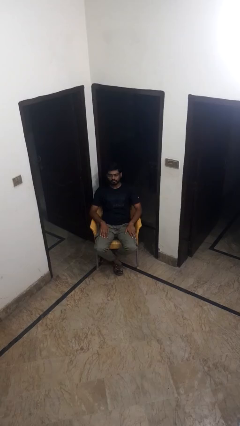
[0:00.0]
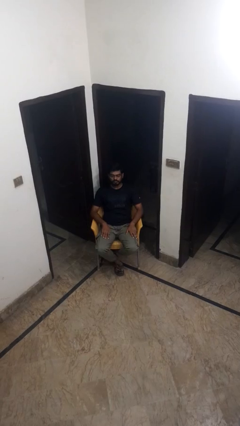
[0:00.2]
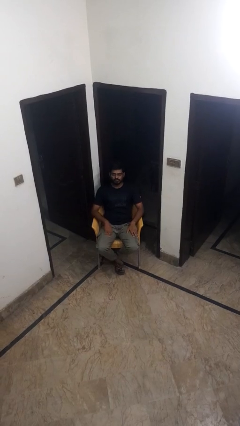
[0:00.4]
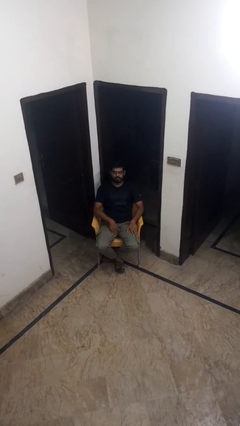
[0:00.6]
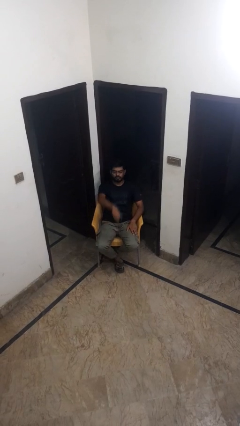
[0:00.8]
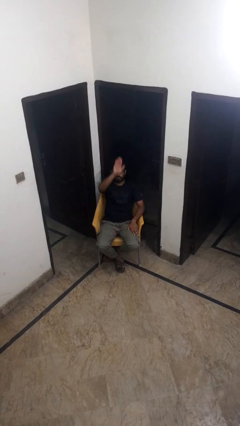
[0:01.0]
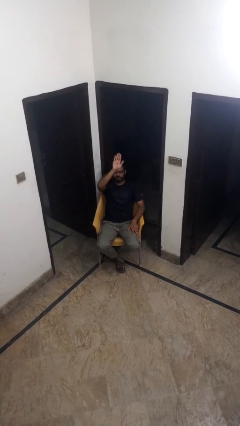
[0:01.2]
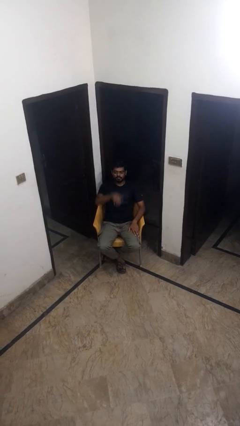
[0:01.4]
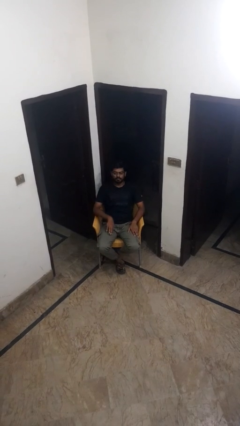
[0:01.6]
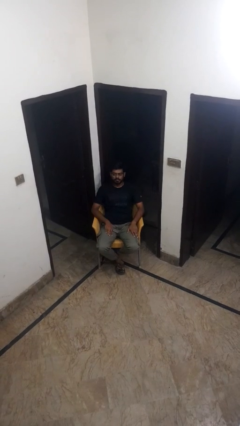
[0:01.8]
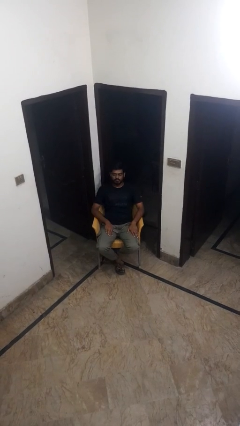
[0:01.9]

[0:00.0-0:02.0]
person gestures swipe up

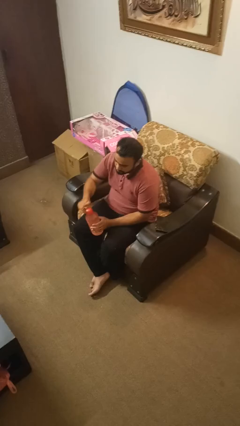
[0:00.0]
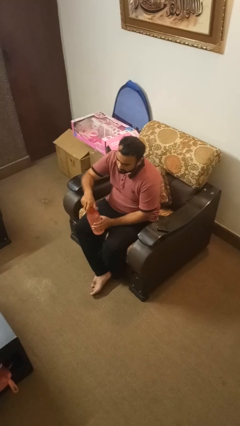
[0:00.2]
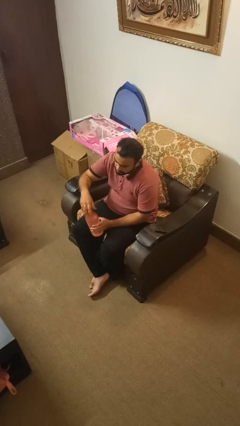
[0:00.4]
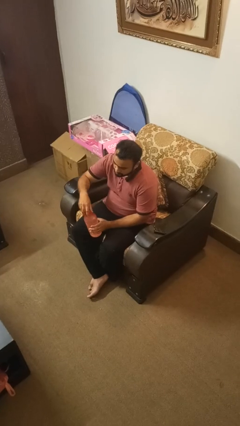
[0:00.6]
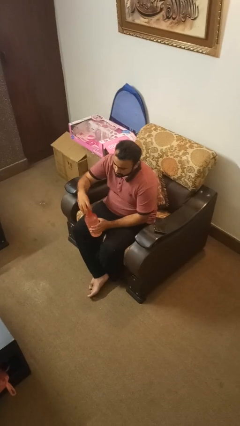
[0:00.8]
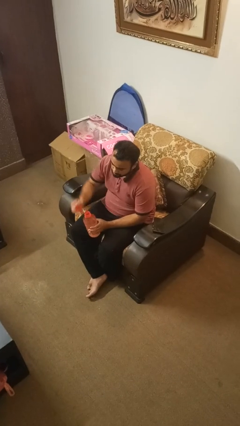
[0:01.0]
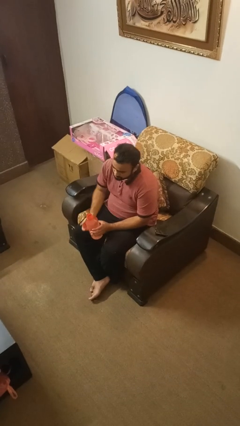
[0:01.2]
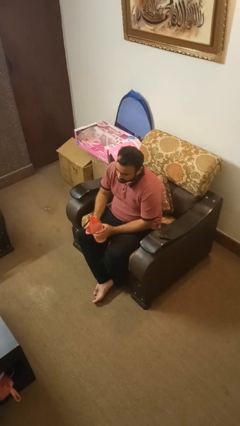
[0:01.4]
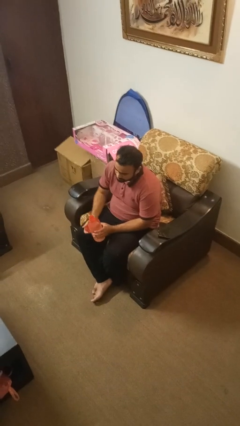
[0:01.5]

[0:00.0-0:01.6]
person unscrews lid from bottle

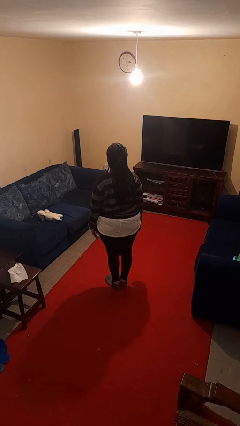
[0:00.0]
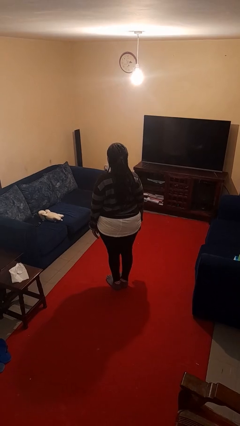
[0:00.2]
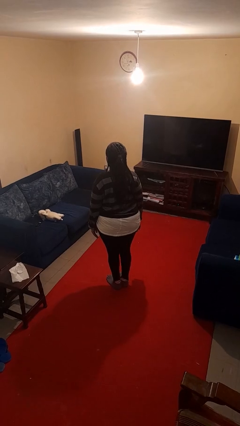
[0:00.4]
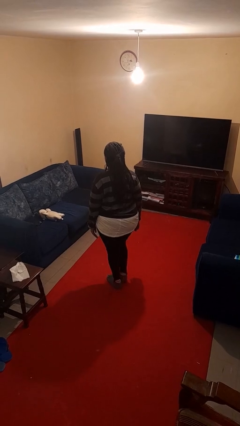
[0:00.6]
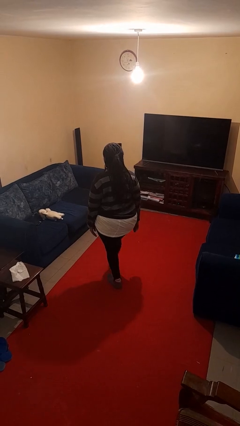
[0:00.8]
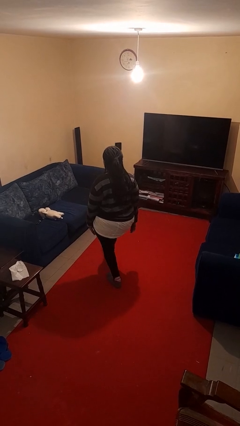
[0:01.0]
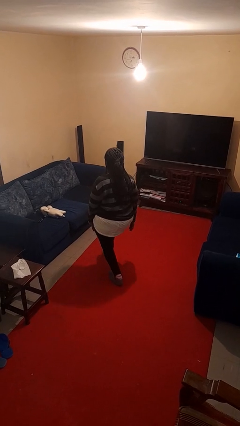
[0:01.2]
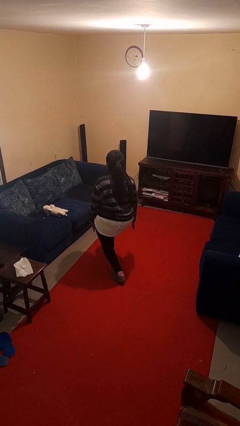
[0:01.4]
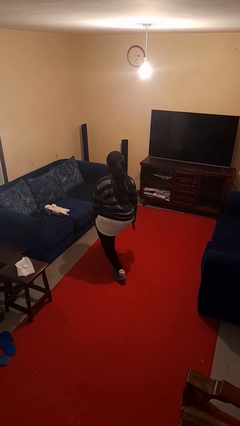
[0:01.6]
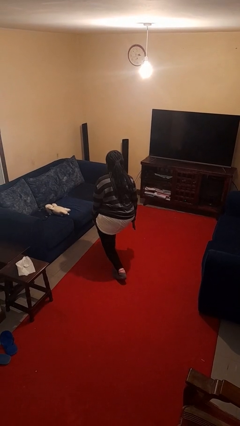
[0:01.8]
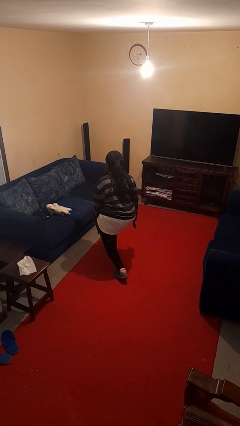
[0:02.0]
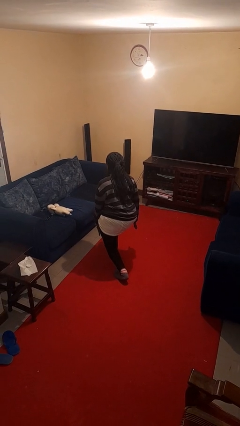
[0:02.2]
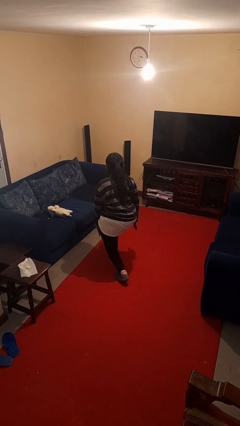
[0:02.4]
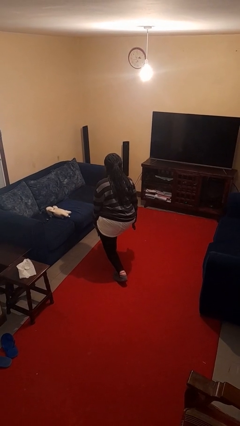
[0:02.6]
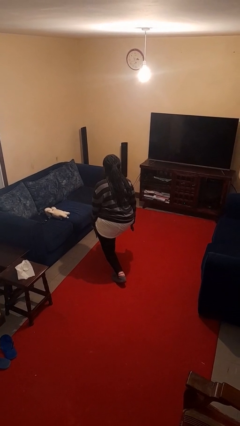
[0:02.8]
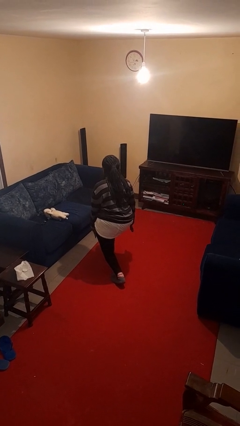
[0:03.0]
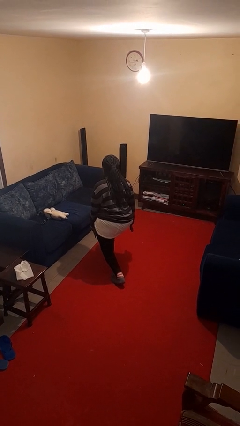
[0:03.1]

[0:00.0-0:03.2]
person exercises with lunges

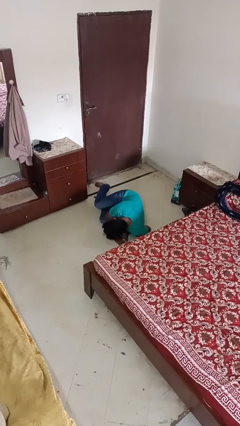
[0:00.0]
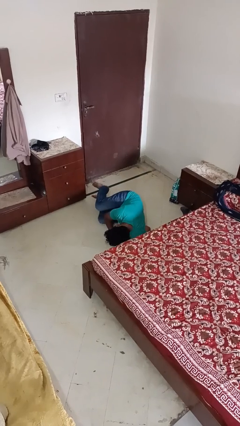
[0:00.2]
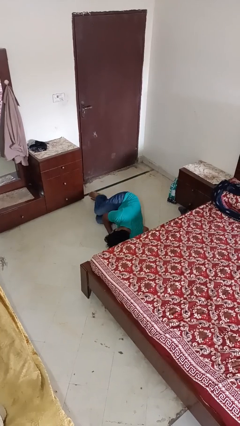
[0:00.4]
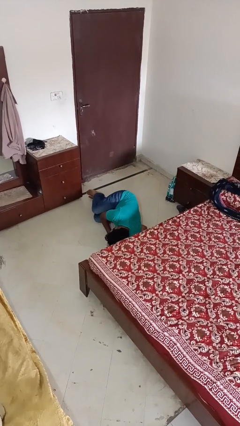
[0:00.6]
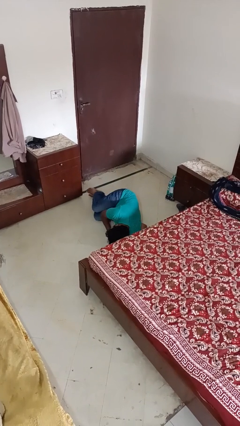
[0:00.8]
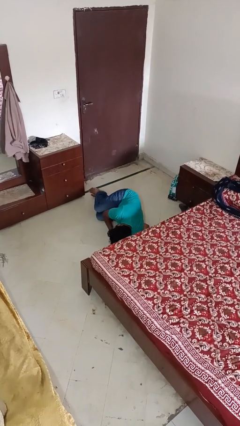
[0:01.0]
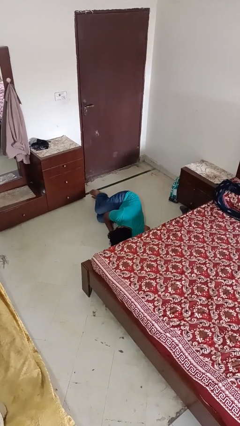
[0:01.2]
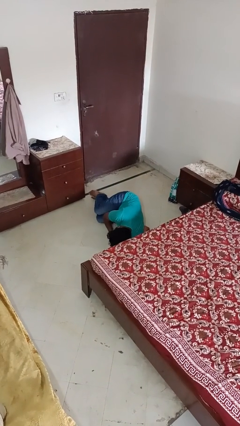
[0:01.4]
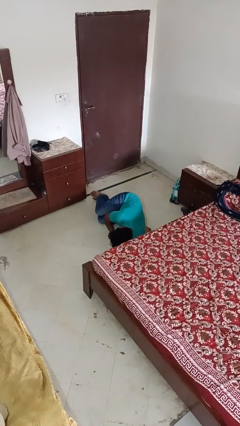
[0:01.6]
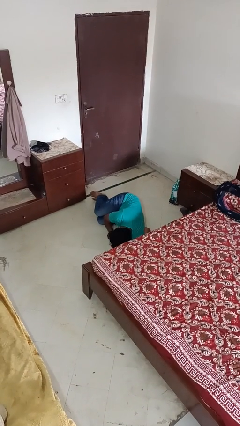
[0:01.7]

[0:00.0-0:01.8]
person lies down on floor

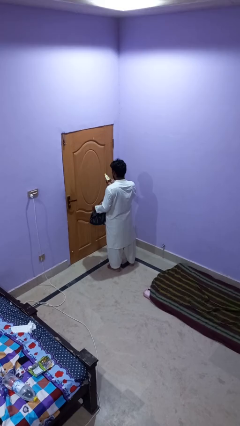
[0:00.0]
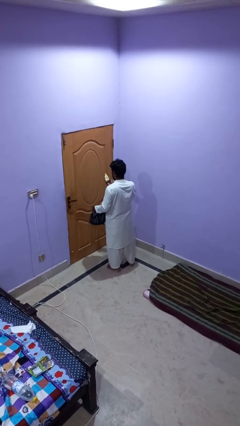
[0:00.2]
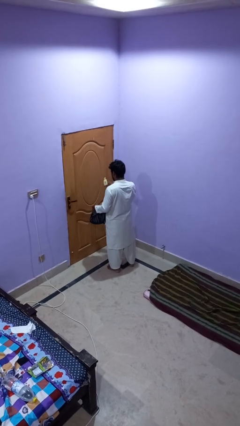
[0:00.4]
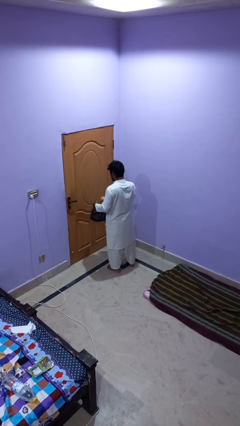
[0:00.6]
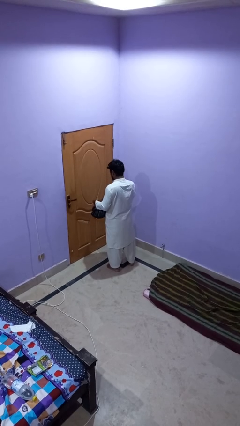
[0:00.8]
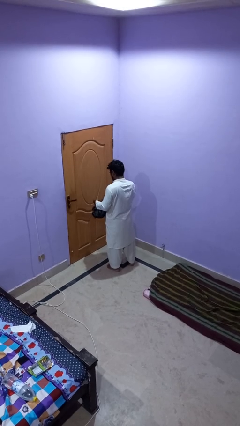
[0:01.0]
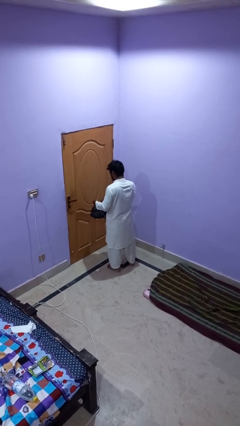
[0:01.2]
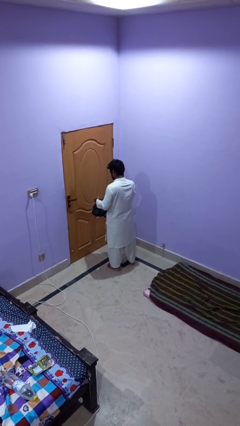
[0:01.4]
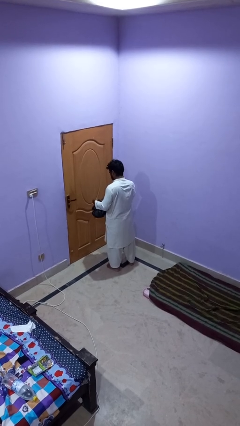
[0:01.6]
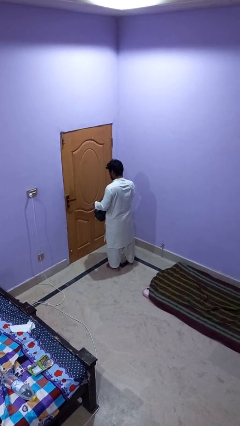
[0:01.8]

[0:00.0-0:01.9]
person puts object into purse

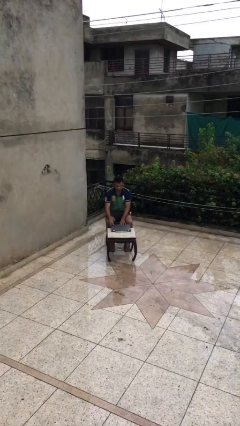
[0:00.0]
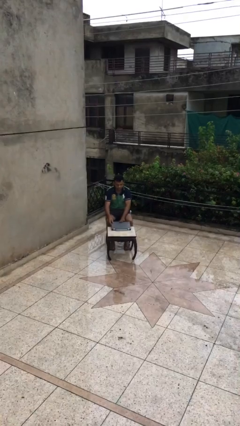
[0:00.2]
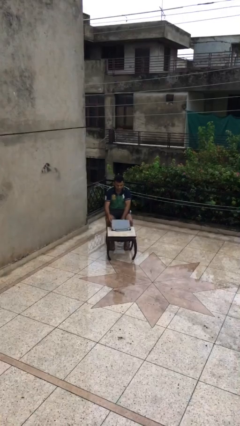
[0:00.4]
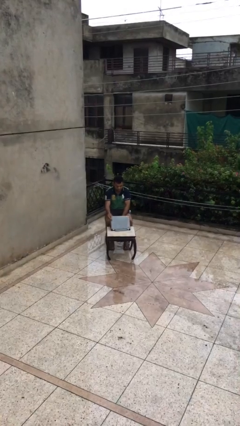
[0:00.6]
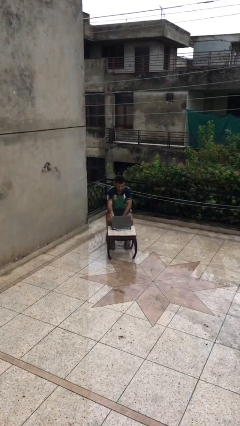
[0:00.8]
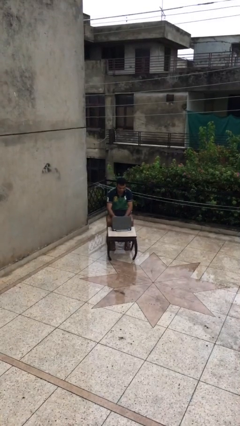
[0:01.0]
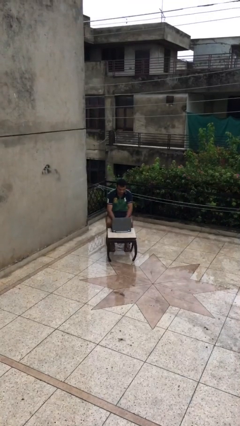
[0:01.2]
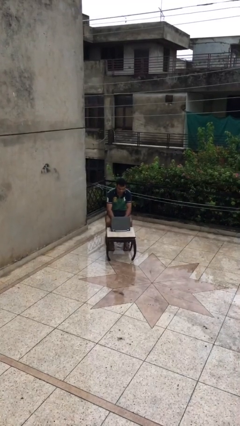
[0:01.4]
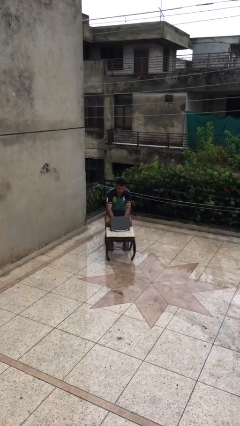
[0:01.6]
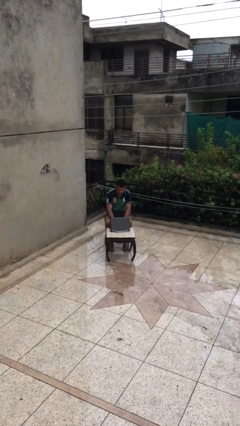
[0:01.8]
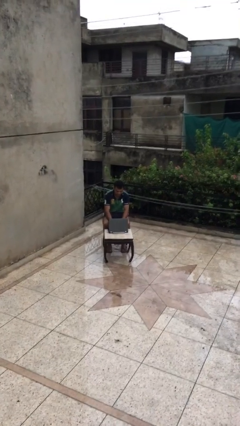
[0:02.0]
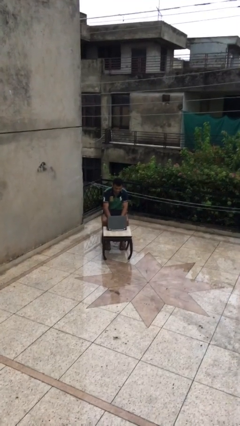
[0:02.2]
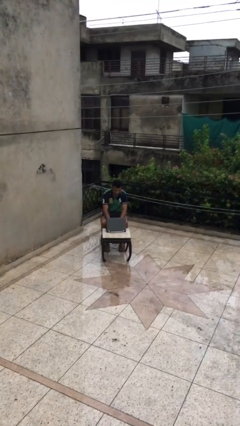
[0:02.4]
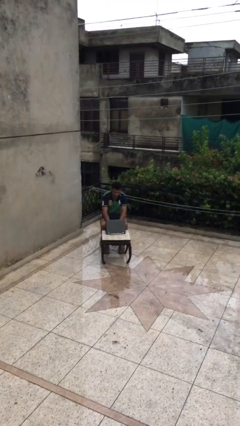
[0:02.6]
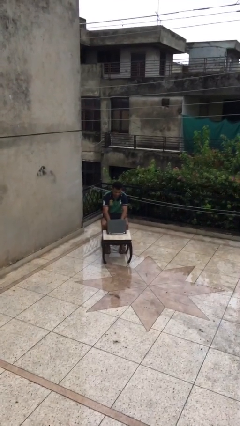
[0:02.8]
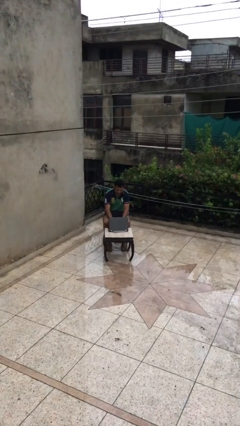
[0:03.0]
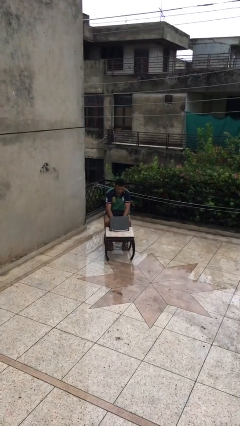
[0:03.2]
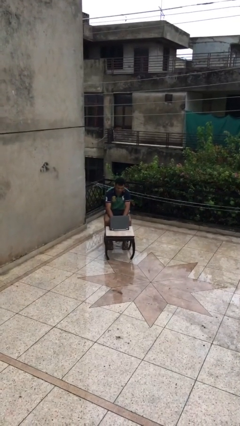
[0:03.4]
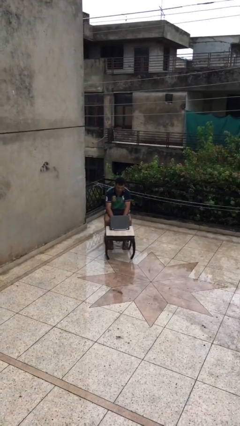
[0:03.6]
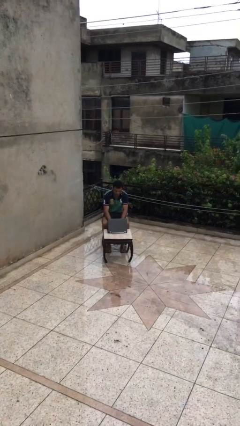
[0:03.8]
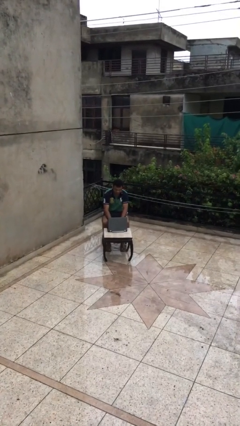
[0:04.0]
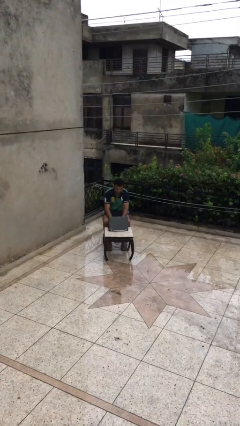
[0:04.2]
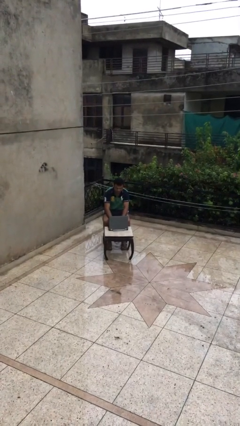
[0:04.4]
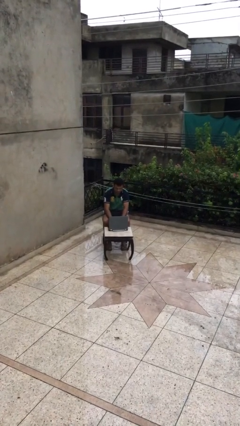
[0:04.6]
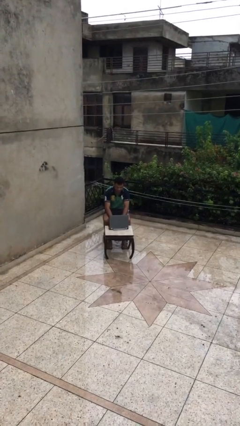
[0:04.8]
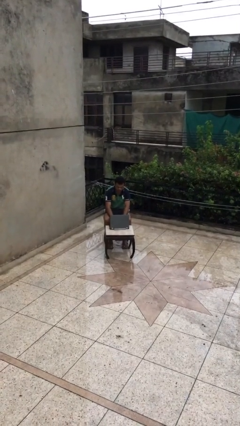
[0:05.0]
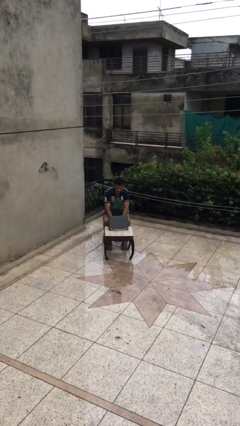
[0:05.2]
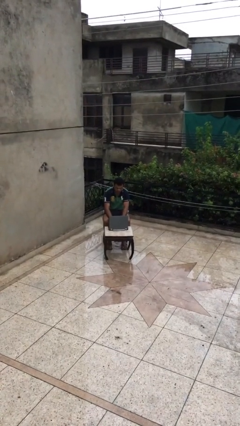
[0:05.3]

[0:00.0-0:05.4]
person interacts with laptop

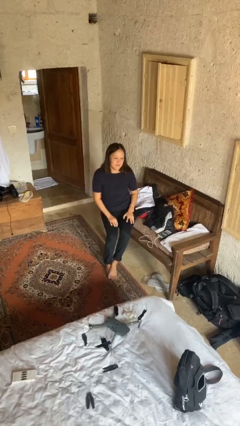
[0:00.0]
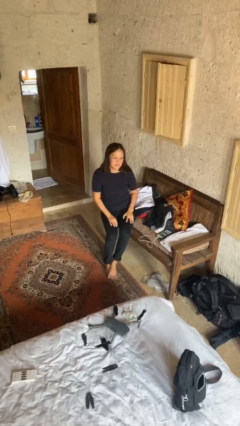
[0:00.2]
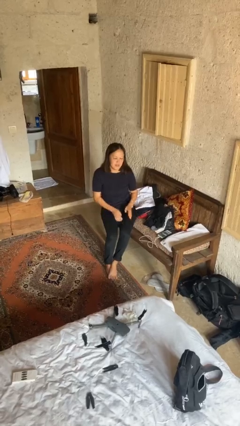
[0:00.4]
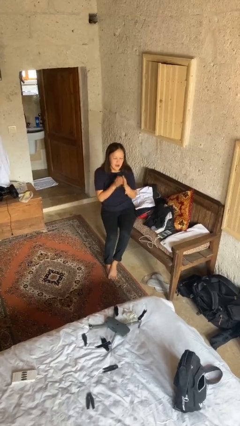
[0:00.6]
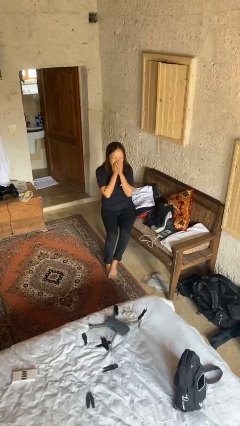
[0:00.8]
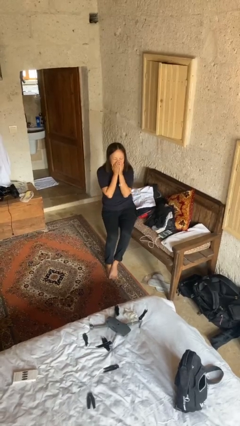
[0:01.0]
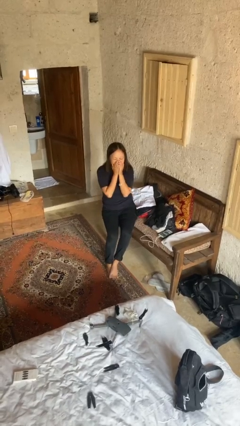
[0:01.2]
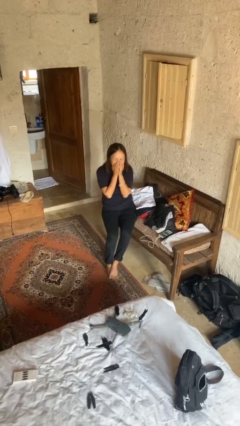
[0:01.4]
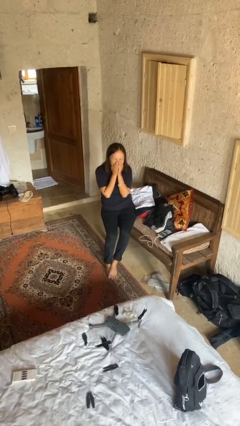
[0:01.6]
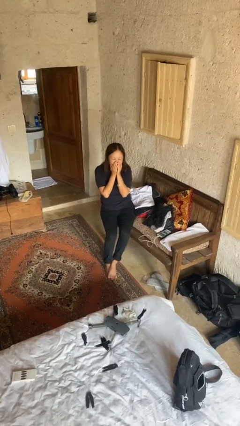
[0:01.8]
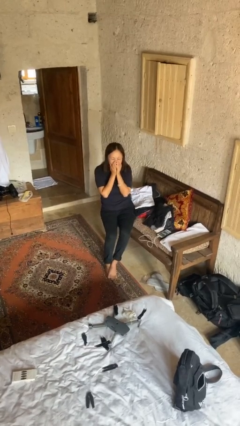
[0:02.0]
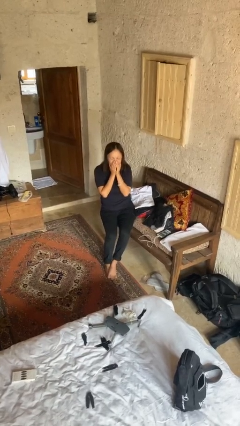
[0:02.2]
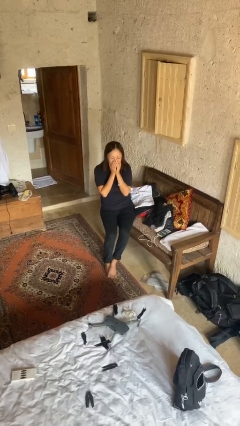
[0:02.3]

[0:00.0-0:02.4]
person yawns
